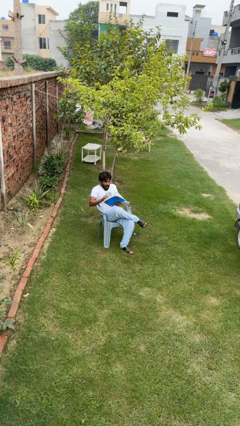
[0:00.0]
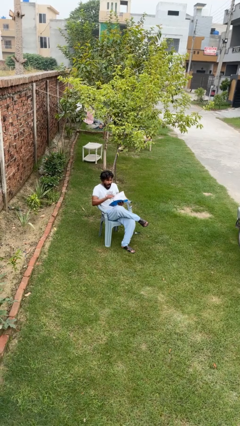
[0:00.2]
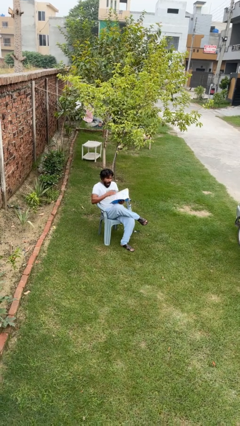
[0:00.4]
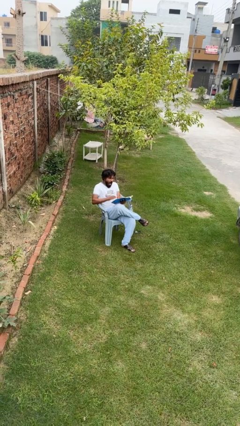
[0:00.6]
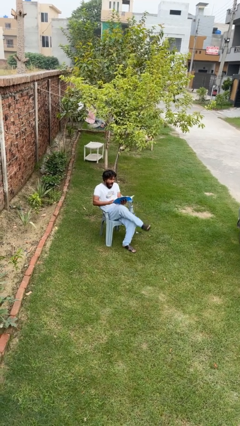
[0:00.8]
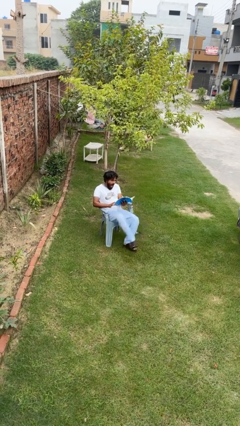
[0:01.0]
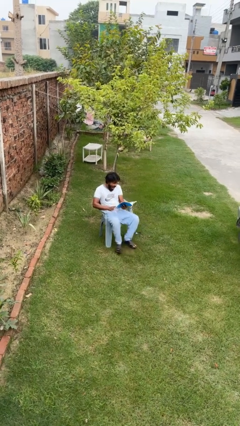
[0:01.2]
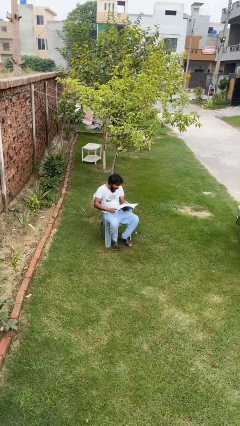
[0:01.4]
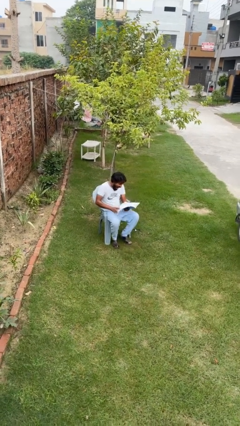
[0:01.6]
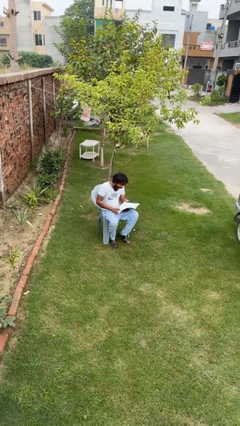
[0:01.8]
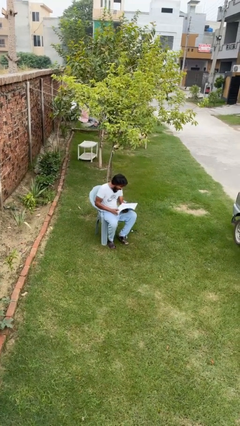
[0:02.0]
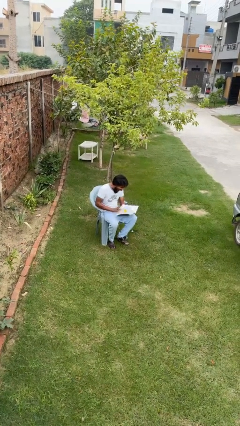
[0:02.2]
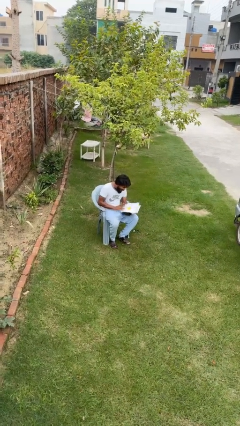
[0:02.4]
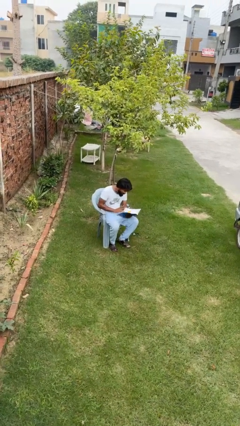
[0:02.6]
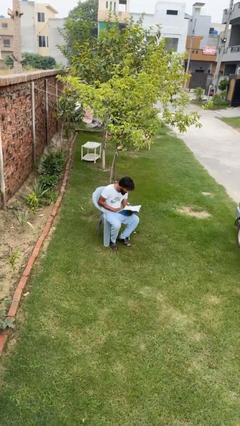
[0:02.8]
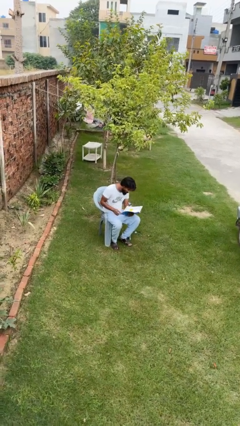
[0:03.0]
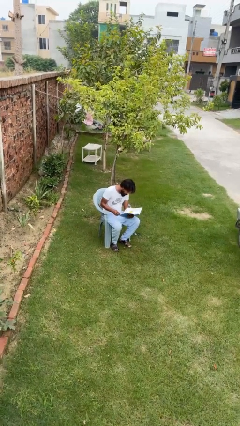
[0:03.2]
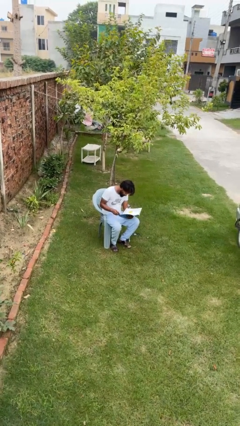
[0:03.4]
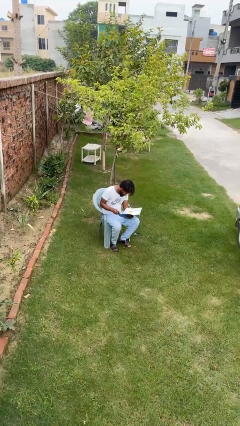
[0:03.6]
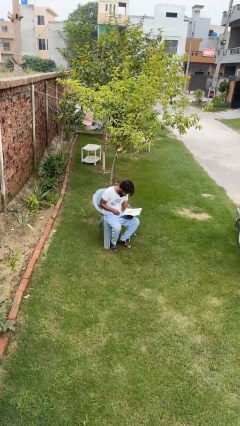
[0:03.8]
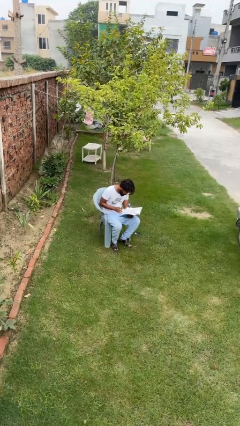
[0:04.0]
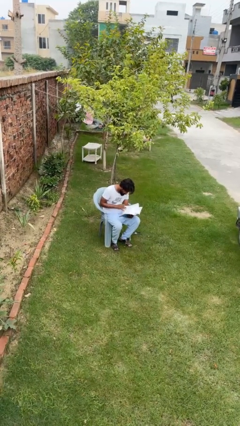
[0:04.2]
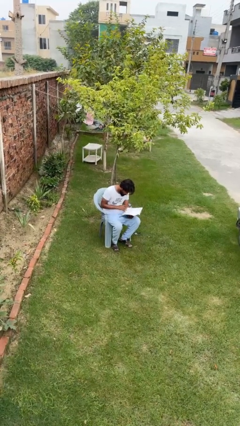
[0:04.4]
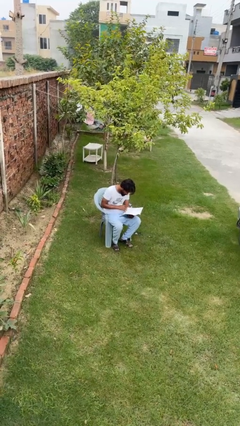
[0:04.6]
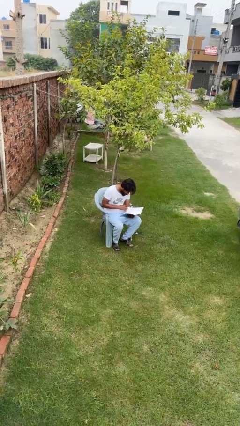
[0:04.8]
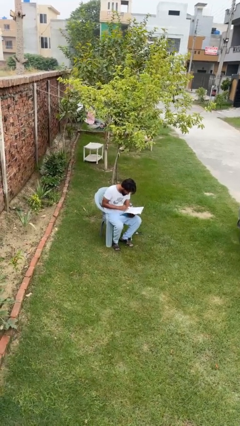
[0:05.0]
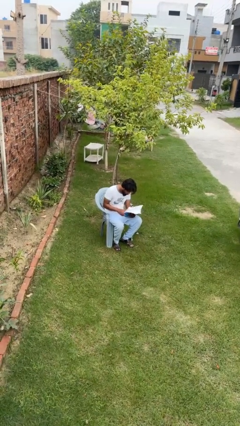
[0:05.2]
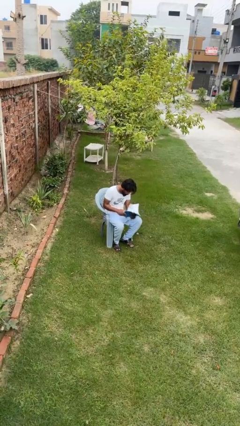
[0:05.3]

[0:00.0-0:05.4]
person reads book

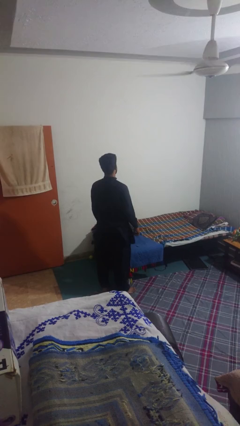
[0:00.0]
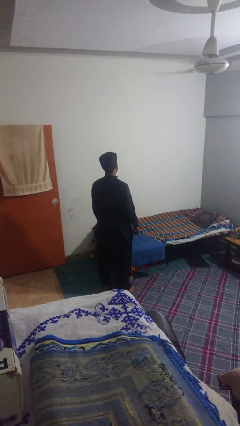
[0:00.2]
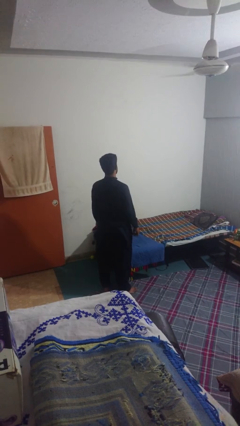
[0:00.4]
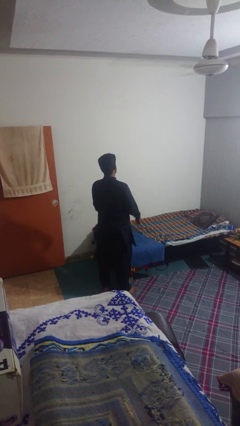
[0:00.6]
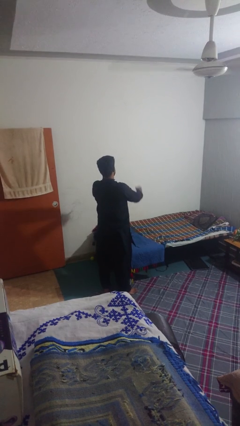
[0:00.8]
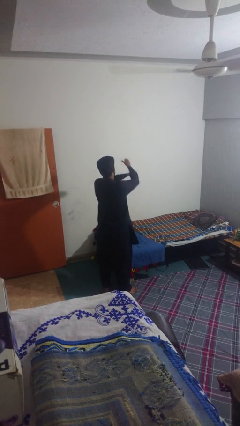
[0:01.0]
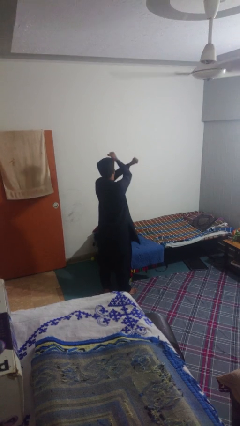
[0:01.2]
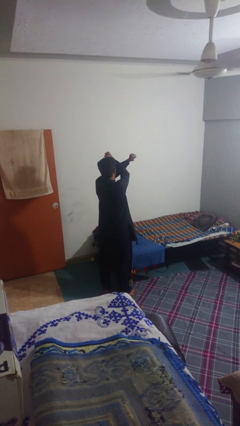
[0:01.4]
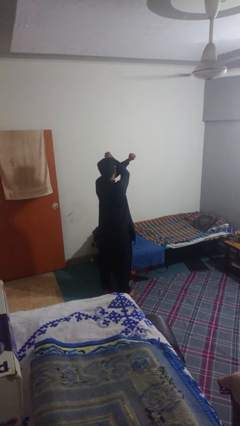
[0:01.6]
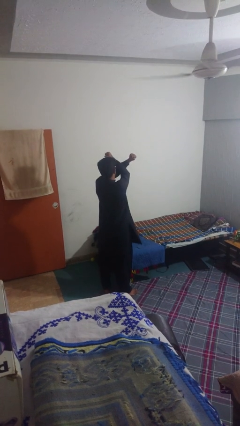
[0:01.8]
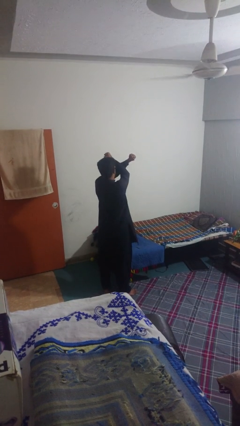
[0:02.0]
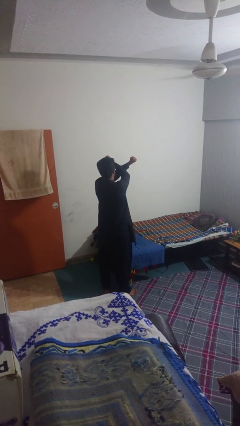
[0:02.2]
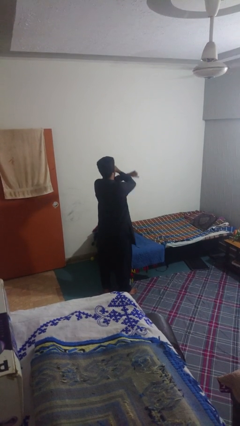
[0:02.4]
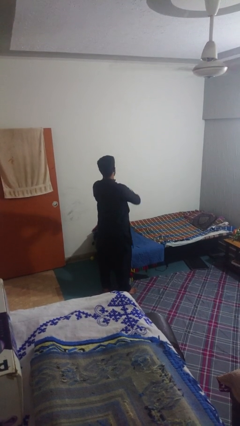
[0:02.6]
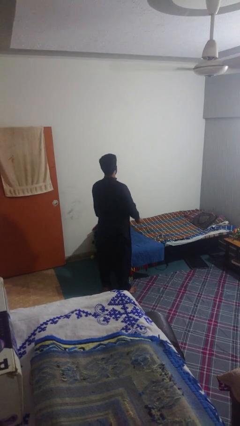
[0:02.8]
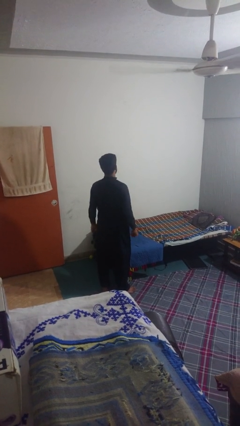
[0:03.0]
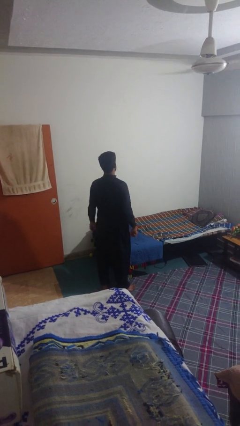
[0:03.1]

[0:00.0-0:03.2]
person gestures arms x

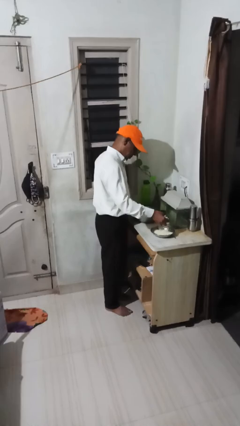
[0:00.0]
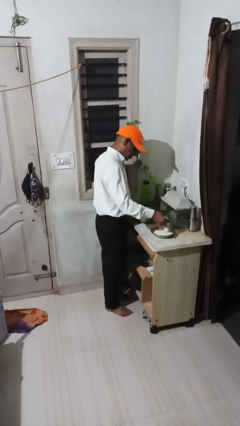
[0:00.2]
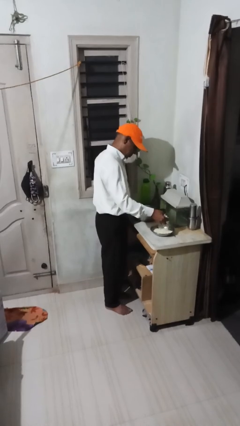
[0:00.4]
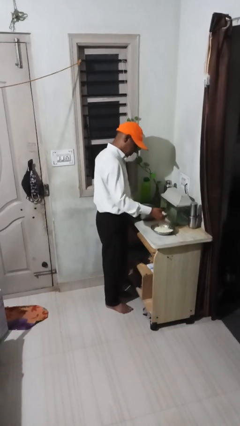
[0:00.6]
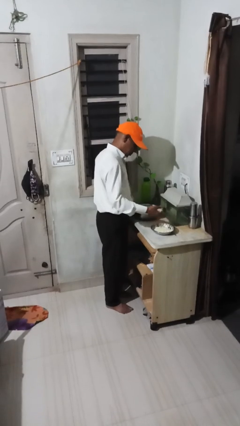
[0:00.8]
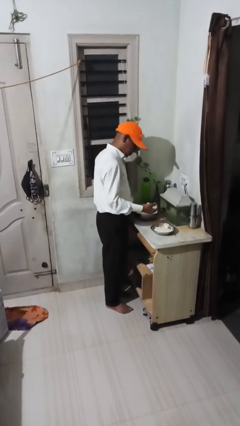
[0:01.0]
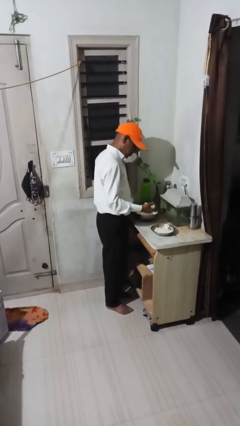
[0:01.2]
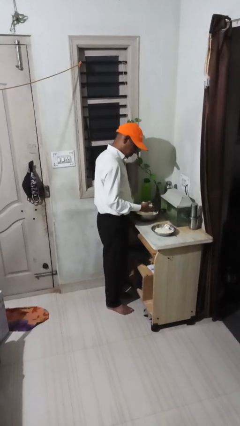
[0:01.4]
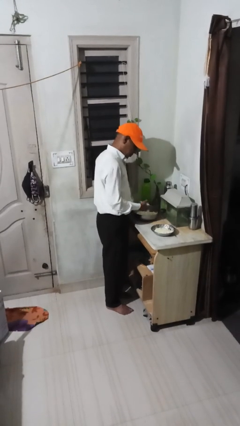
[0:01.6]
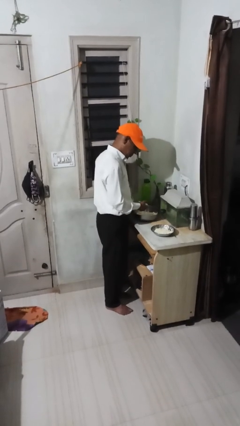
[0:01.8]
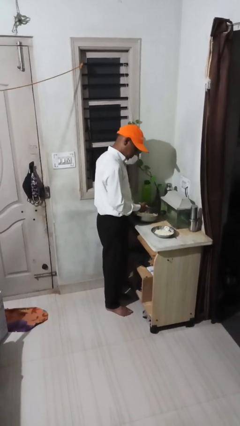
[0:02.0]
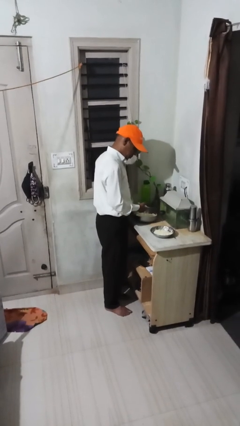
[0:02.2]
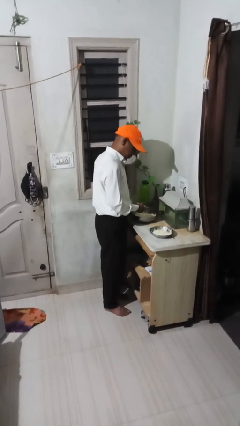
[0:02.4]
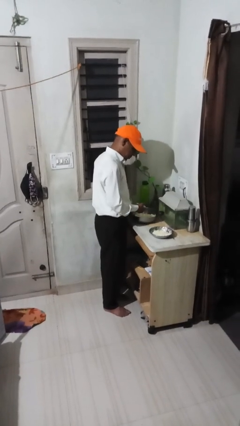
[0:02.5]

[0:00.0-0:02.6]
person pours into bowl

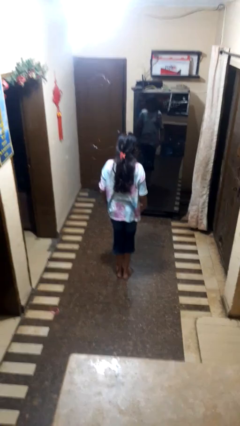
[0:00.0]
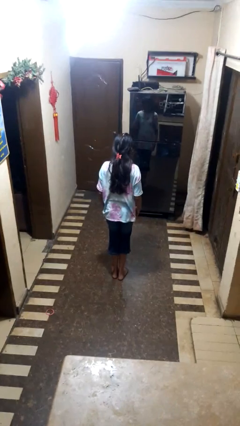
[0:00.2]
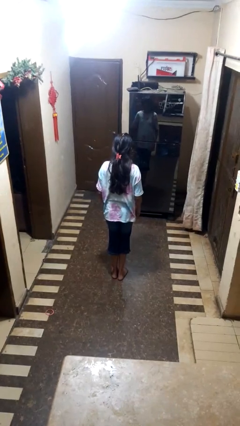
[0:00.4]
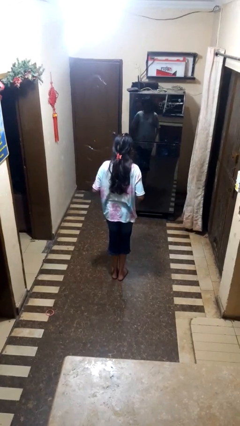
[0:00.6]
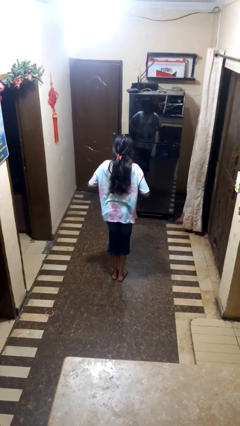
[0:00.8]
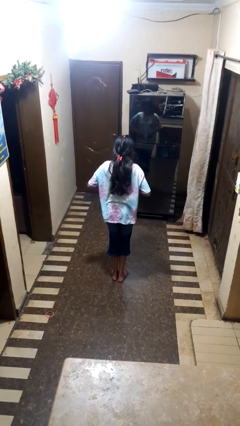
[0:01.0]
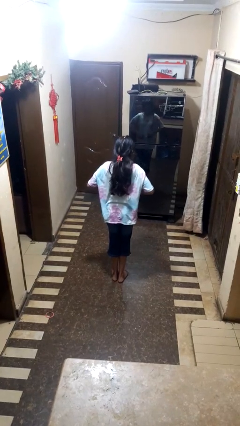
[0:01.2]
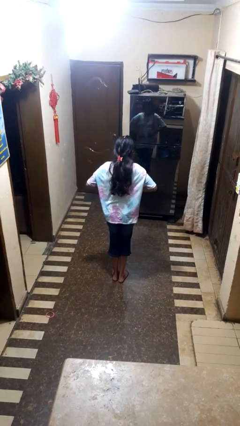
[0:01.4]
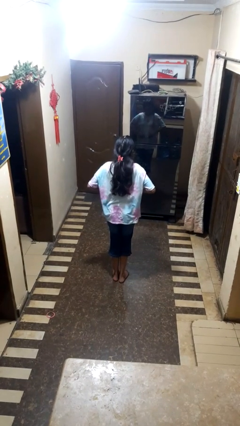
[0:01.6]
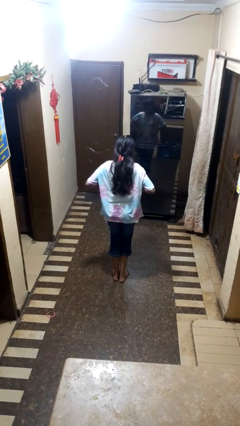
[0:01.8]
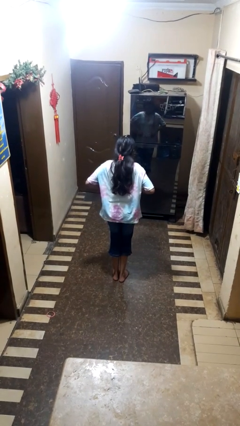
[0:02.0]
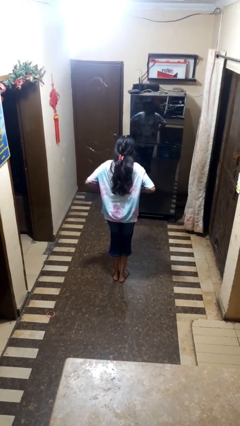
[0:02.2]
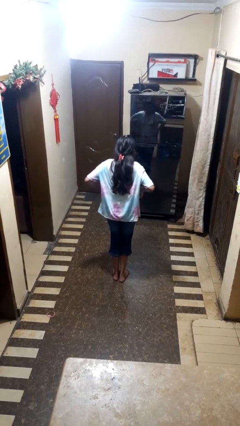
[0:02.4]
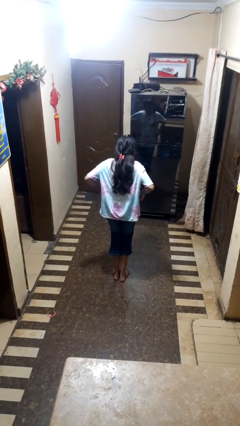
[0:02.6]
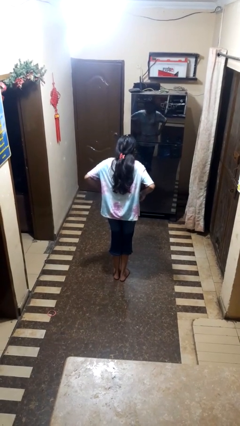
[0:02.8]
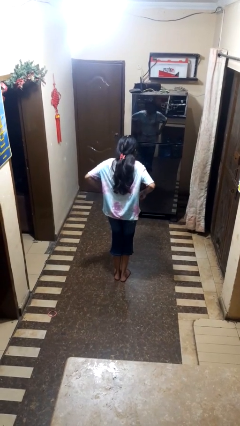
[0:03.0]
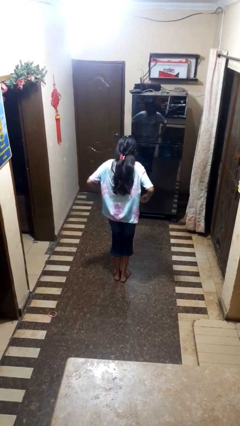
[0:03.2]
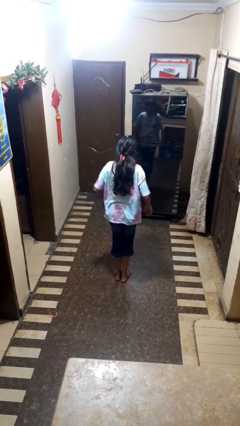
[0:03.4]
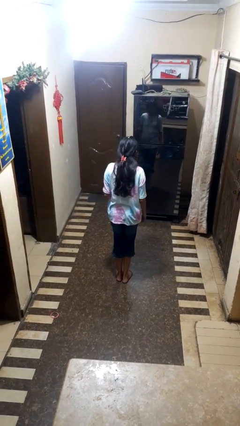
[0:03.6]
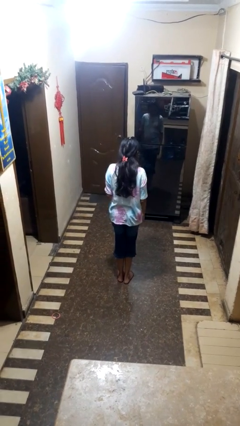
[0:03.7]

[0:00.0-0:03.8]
person hikes up pants

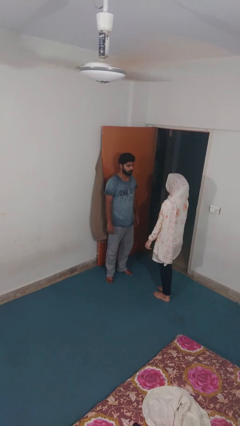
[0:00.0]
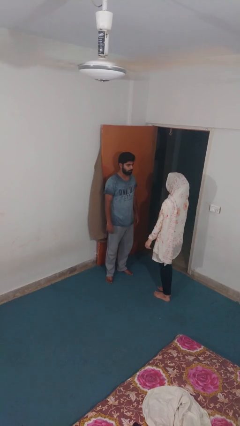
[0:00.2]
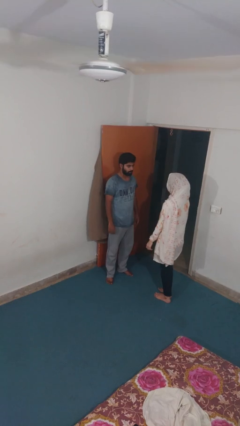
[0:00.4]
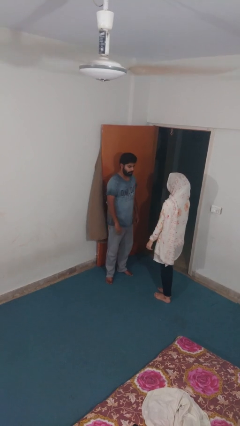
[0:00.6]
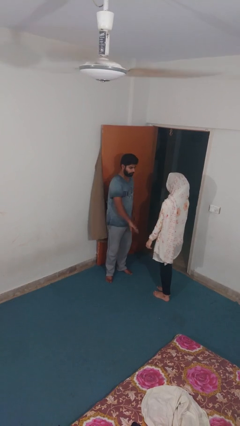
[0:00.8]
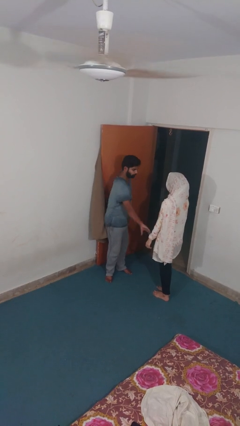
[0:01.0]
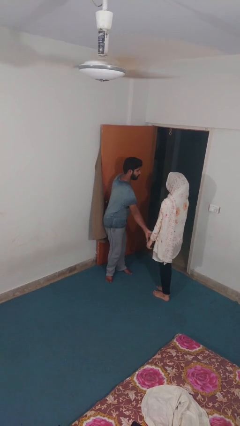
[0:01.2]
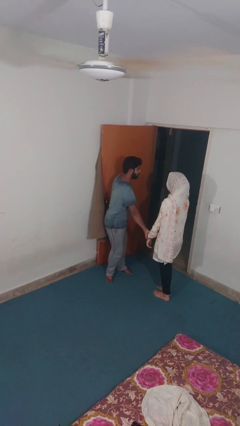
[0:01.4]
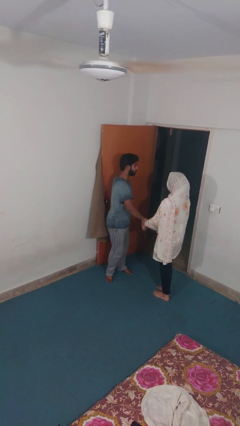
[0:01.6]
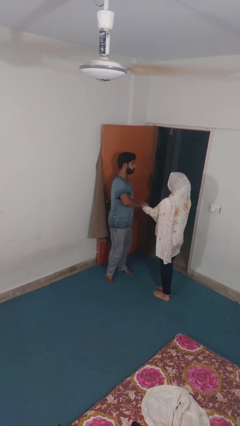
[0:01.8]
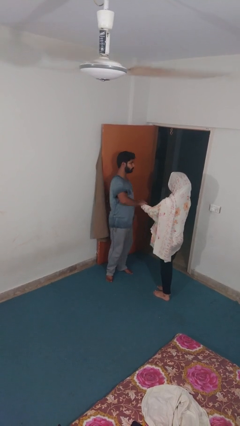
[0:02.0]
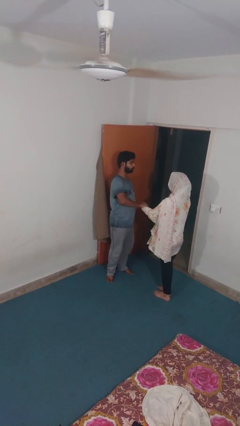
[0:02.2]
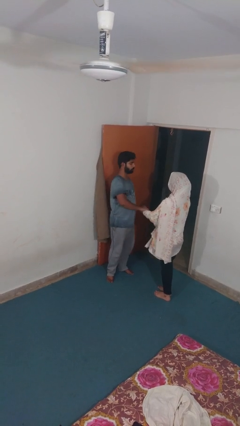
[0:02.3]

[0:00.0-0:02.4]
person grabs person by forearm

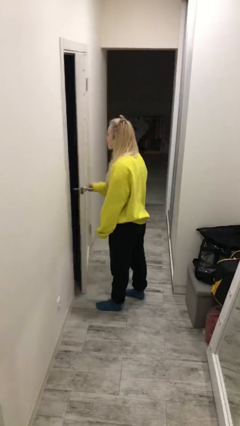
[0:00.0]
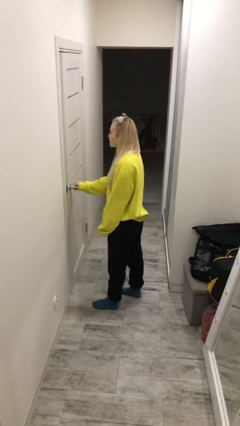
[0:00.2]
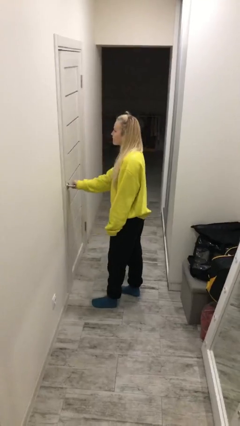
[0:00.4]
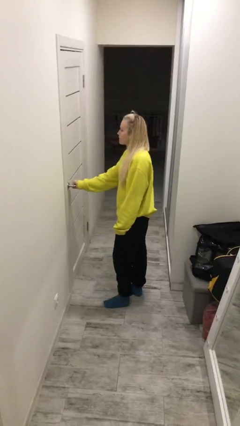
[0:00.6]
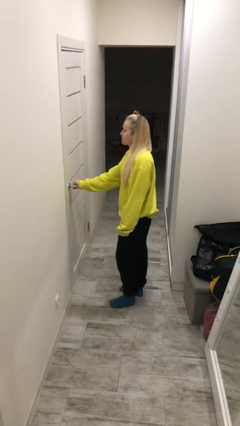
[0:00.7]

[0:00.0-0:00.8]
person closes facility door
